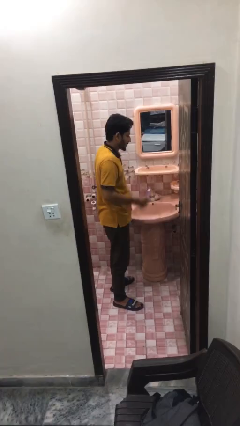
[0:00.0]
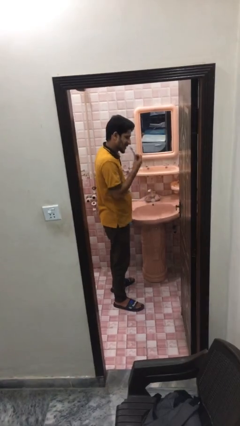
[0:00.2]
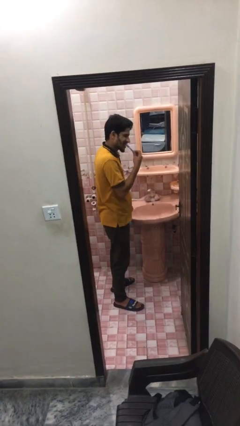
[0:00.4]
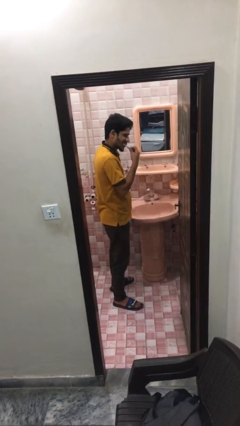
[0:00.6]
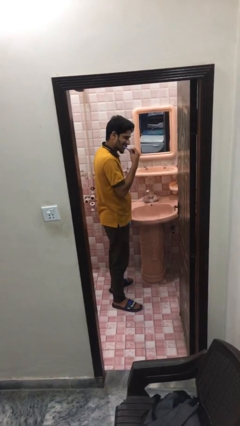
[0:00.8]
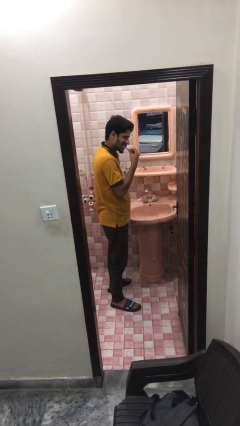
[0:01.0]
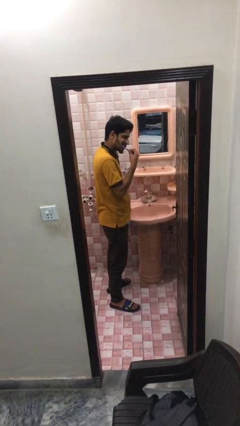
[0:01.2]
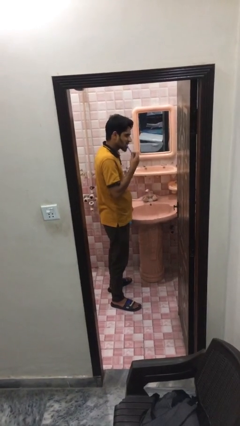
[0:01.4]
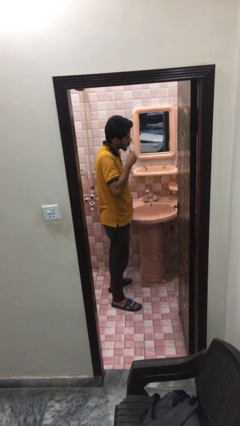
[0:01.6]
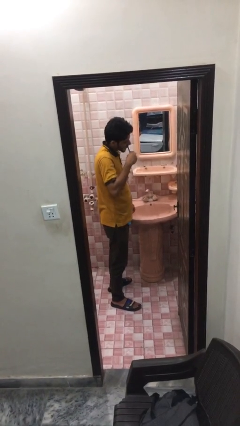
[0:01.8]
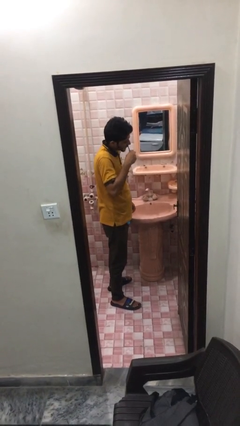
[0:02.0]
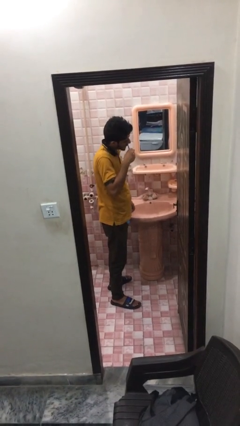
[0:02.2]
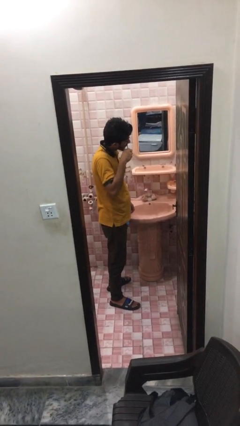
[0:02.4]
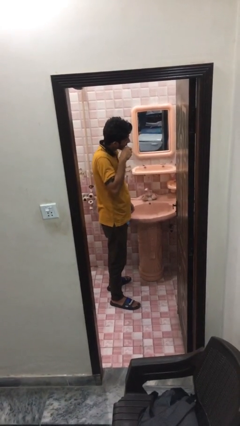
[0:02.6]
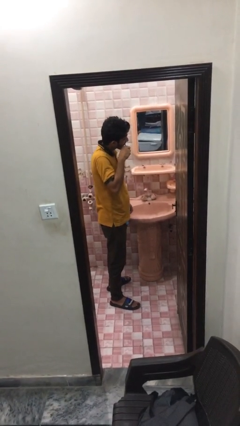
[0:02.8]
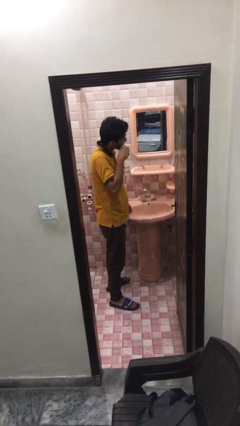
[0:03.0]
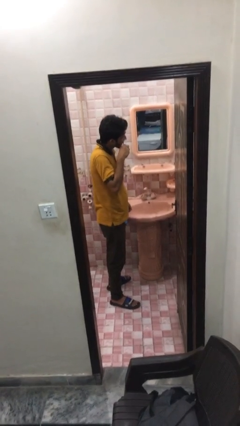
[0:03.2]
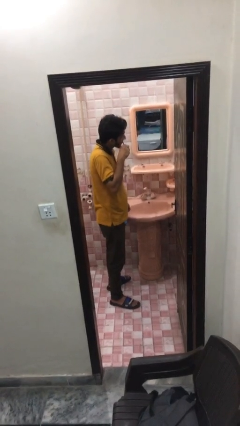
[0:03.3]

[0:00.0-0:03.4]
person brushes teeth

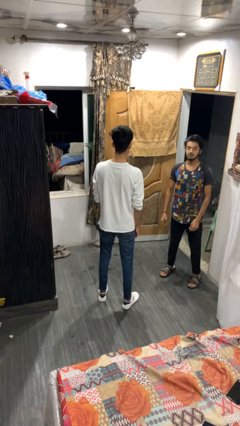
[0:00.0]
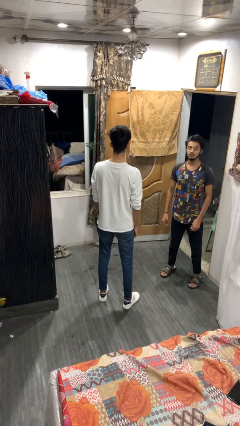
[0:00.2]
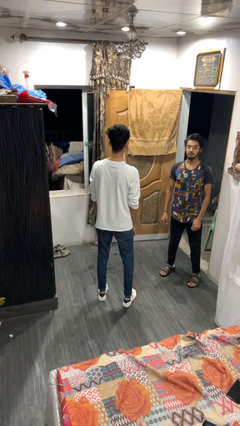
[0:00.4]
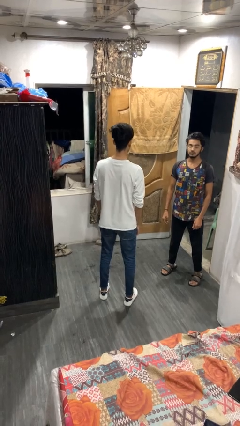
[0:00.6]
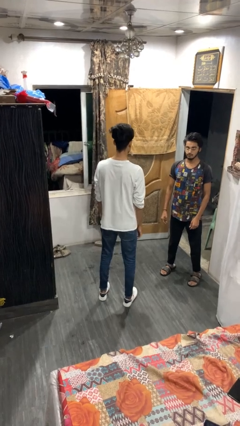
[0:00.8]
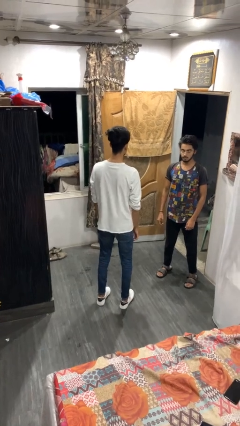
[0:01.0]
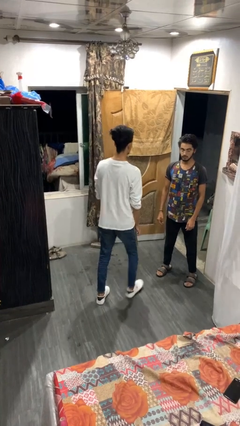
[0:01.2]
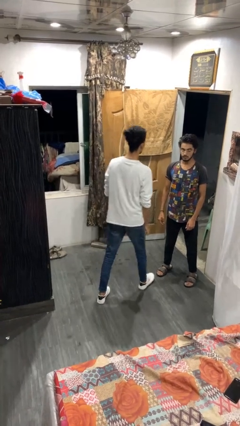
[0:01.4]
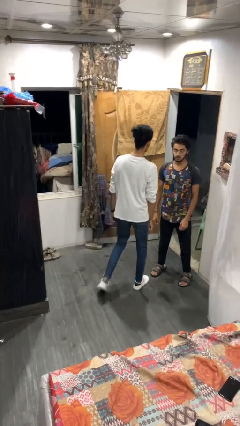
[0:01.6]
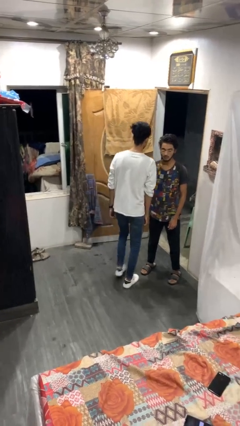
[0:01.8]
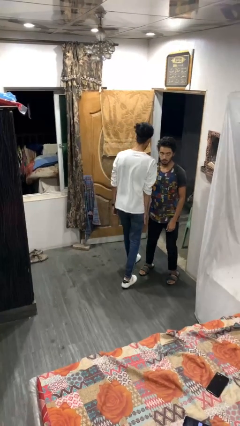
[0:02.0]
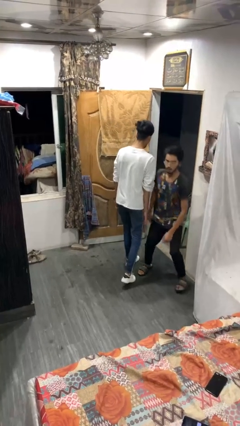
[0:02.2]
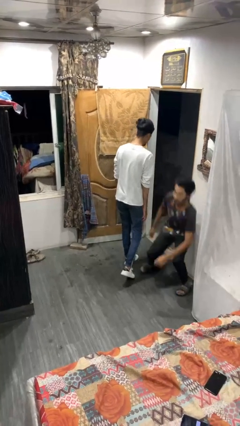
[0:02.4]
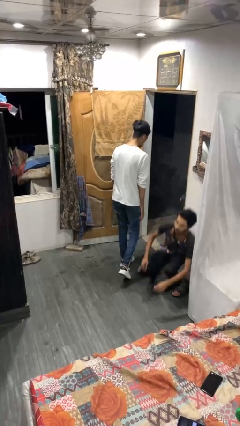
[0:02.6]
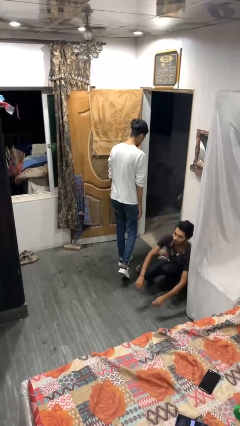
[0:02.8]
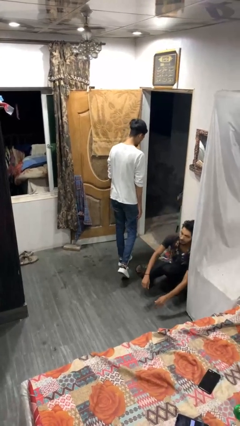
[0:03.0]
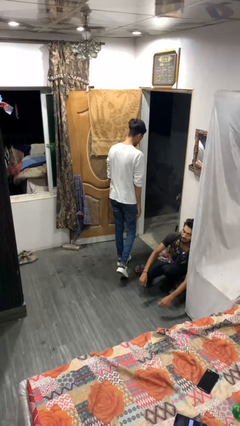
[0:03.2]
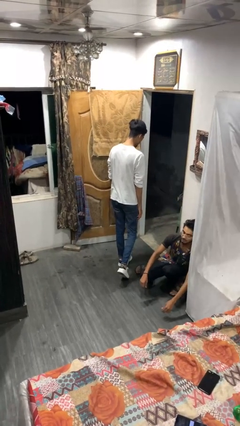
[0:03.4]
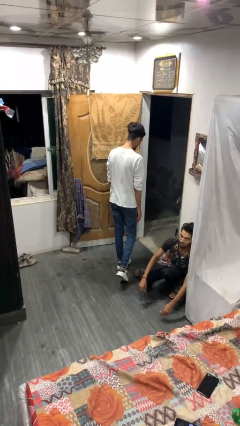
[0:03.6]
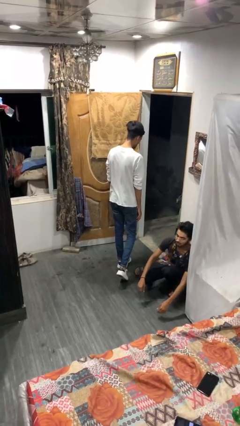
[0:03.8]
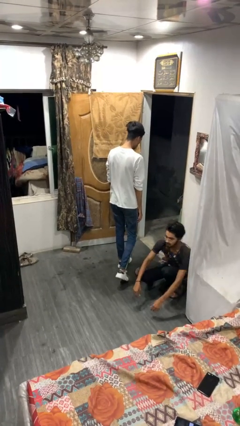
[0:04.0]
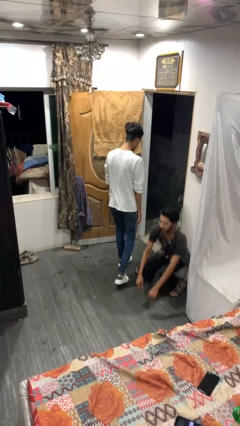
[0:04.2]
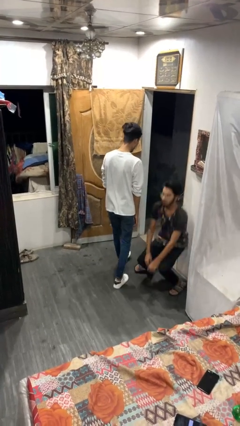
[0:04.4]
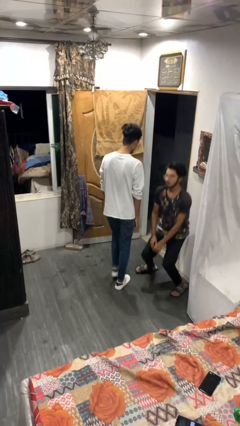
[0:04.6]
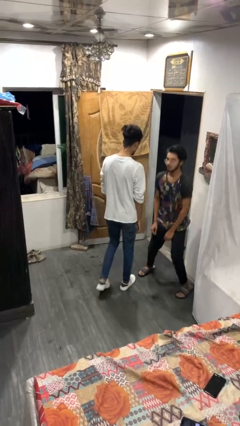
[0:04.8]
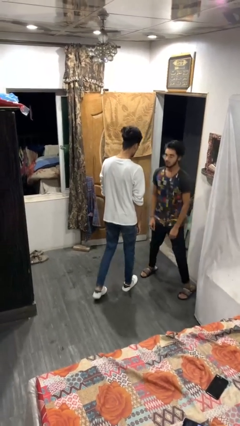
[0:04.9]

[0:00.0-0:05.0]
person bumps into person

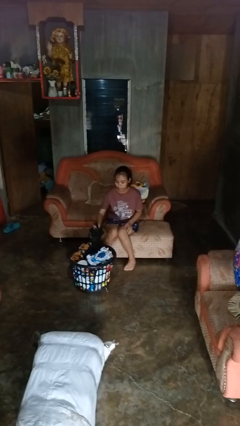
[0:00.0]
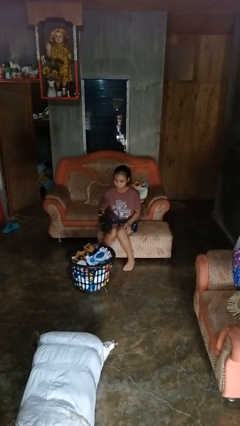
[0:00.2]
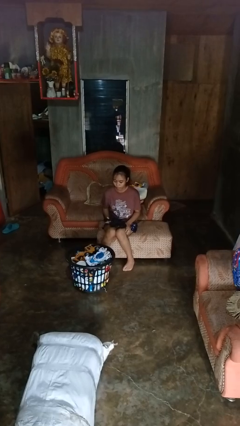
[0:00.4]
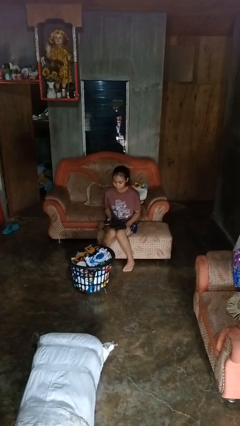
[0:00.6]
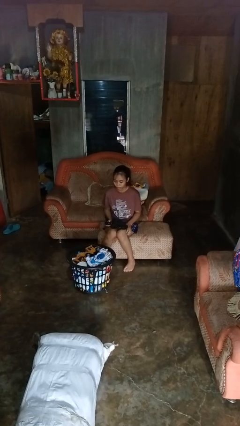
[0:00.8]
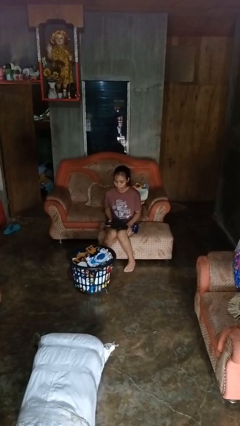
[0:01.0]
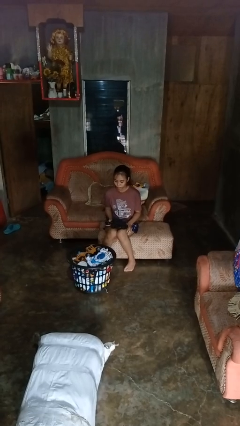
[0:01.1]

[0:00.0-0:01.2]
person takes object from basket

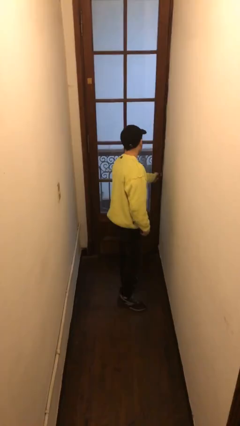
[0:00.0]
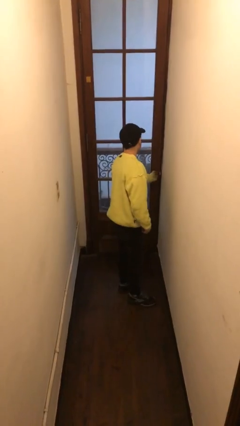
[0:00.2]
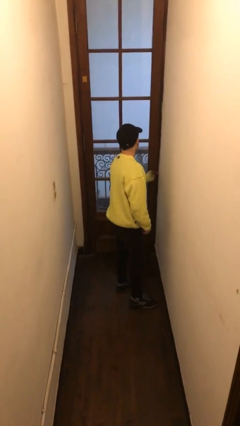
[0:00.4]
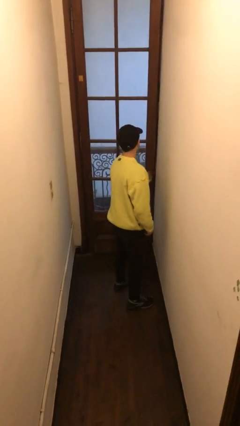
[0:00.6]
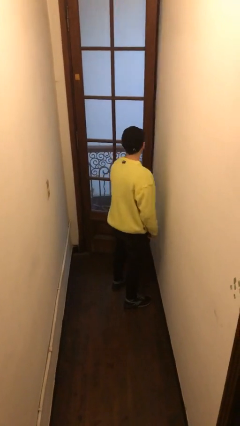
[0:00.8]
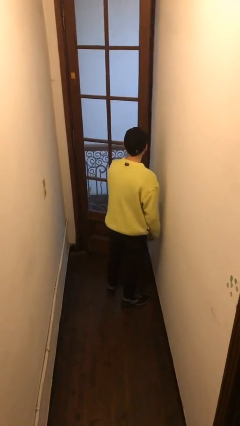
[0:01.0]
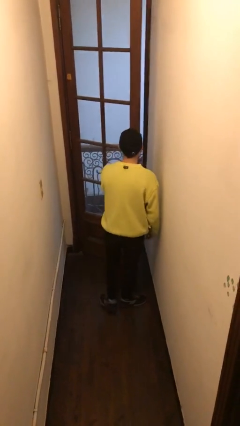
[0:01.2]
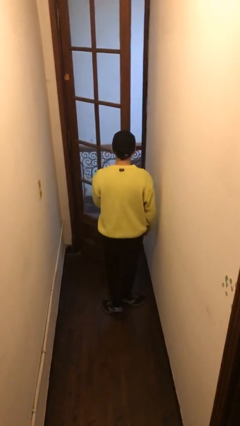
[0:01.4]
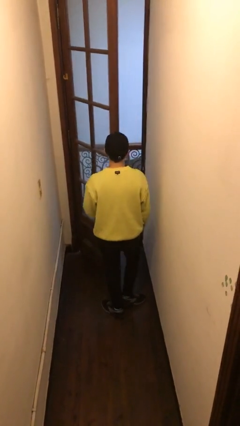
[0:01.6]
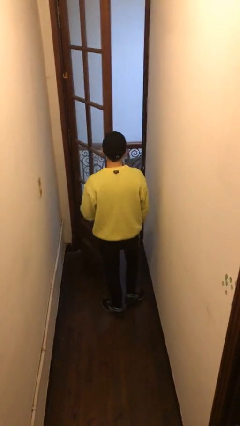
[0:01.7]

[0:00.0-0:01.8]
person opens facility door

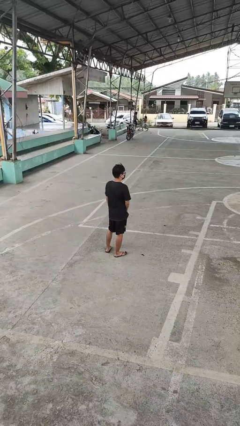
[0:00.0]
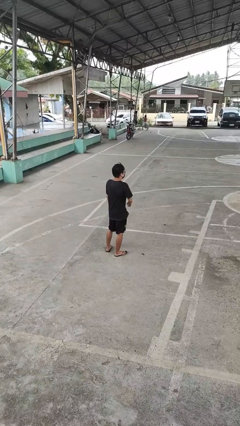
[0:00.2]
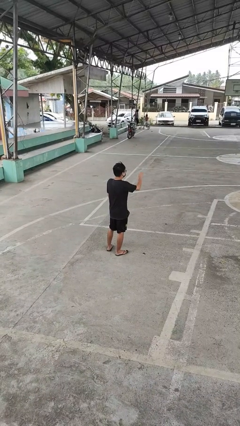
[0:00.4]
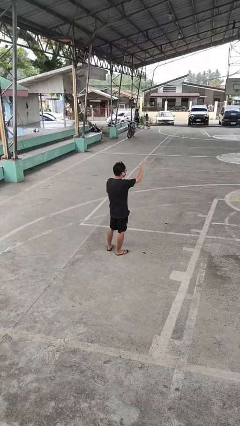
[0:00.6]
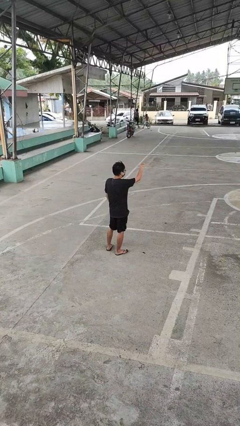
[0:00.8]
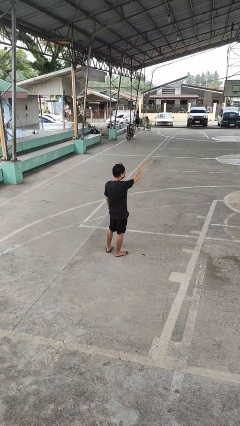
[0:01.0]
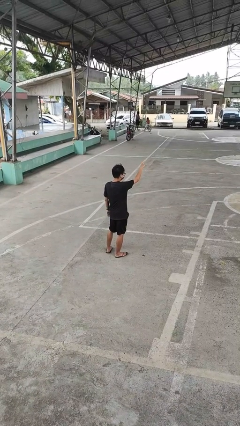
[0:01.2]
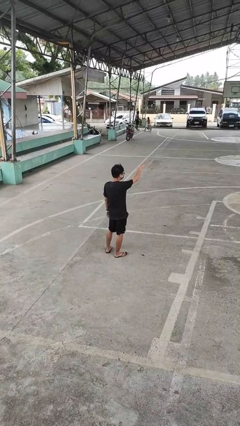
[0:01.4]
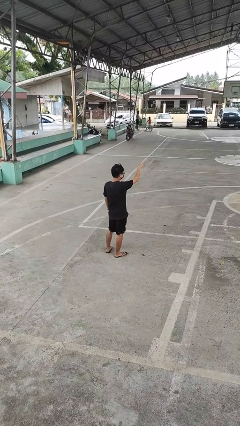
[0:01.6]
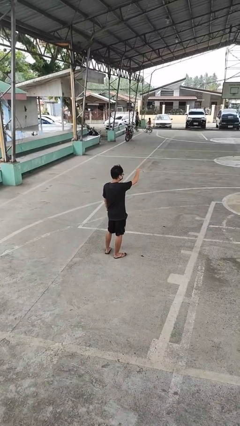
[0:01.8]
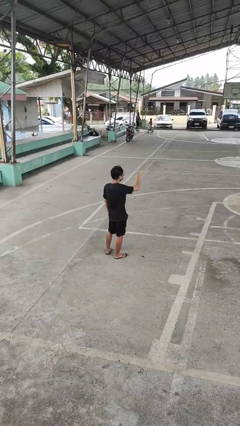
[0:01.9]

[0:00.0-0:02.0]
person gestures come here

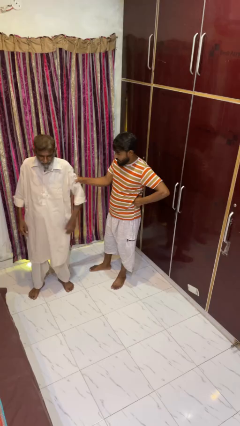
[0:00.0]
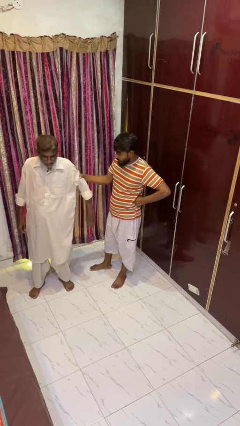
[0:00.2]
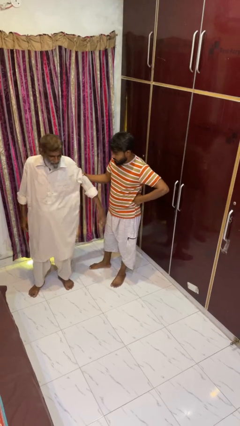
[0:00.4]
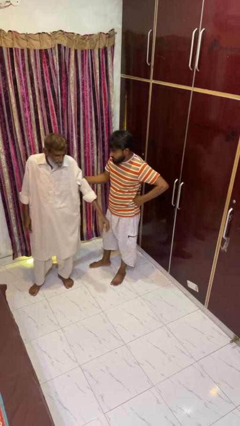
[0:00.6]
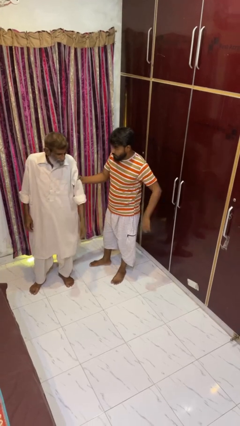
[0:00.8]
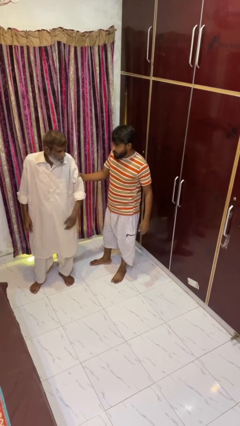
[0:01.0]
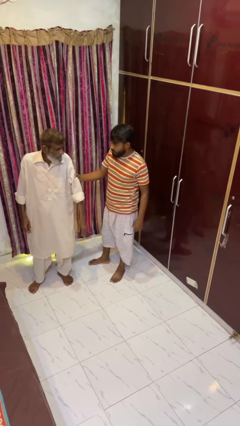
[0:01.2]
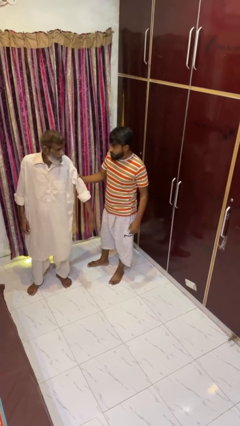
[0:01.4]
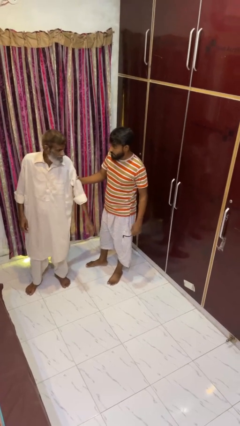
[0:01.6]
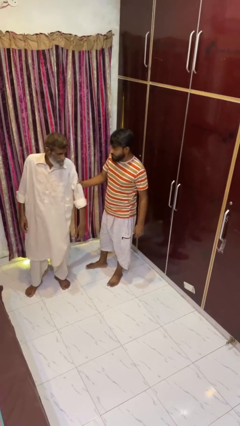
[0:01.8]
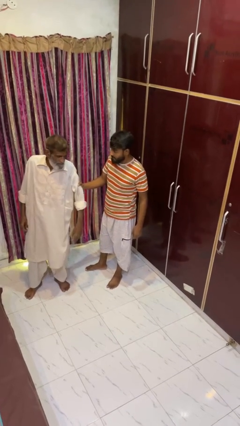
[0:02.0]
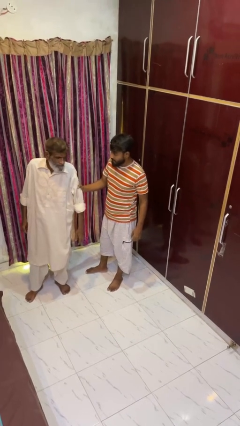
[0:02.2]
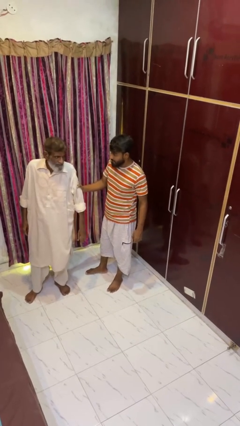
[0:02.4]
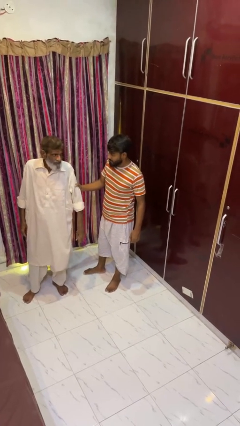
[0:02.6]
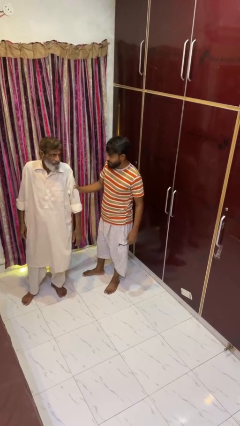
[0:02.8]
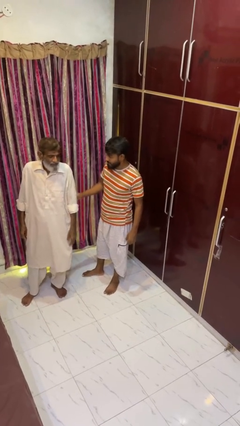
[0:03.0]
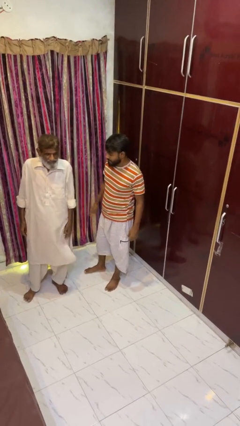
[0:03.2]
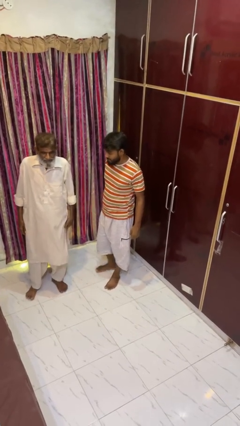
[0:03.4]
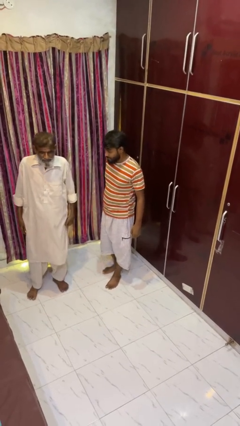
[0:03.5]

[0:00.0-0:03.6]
person grabs person by bicep
